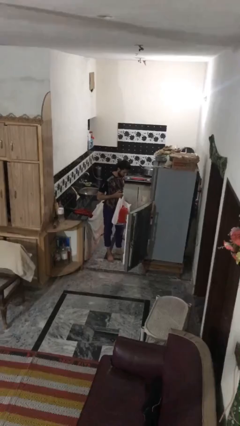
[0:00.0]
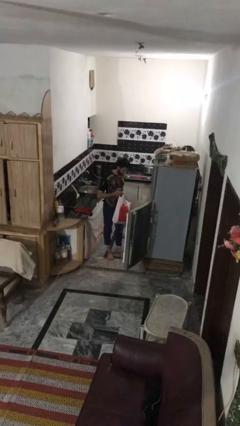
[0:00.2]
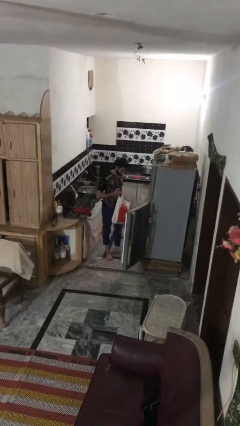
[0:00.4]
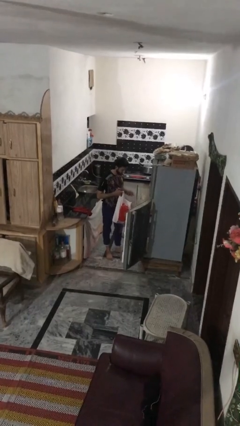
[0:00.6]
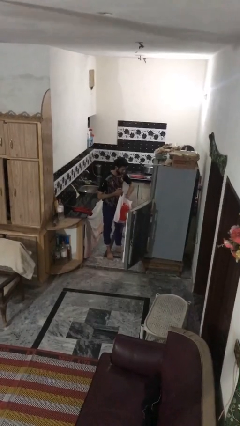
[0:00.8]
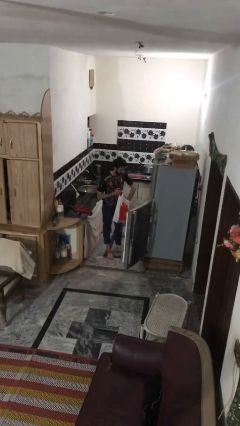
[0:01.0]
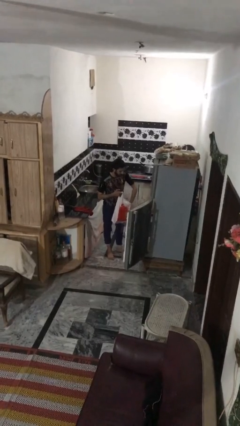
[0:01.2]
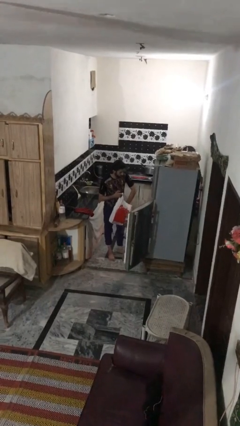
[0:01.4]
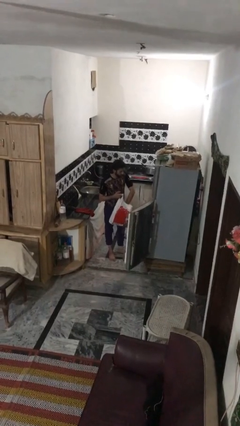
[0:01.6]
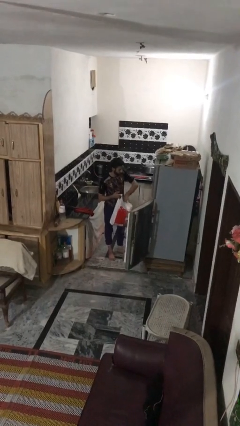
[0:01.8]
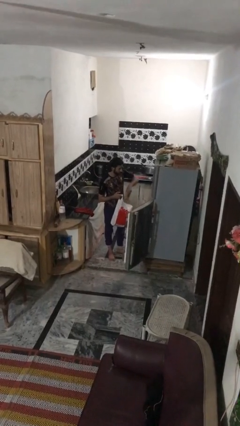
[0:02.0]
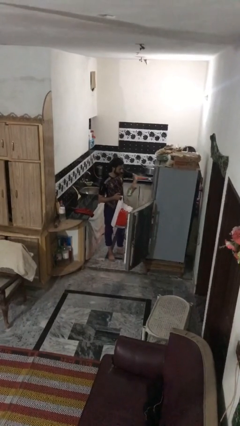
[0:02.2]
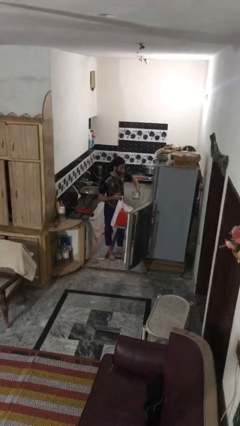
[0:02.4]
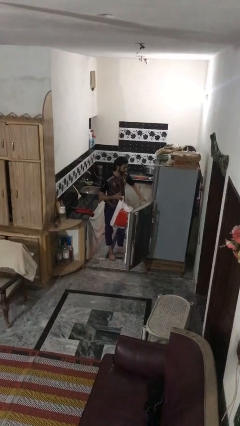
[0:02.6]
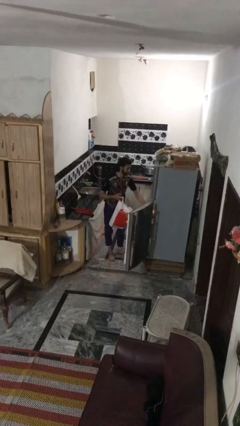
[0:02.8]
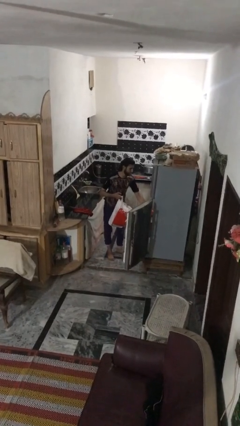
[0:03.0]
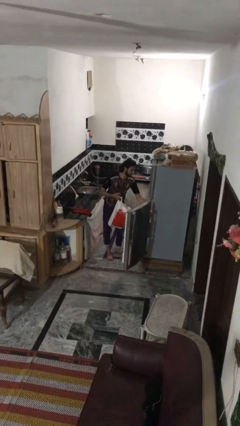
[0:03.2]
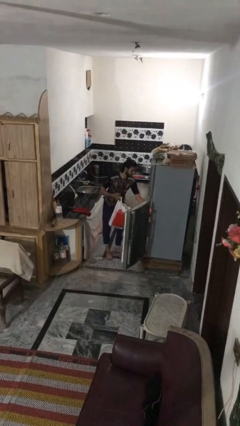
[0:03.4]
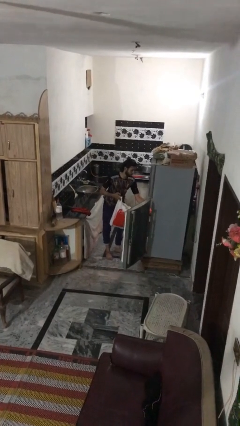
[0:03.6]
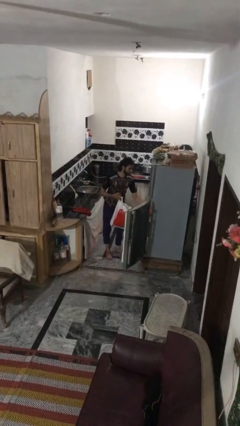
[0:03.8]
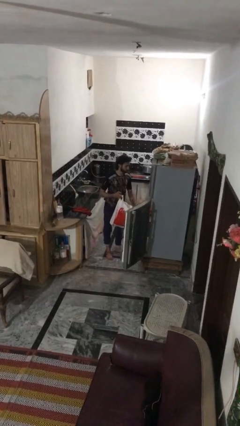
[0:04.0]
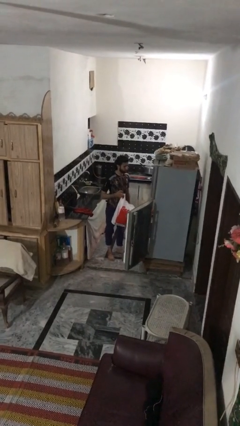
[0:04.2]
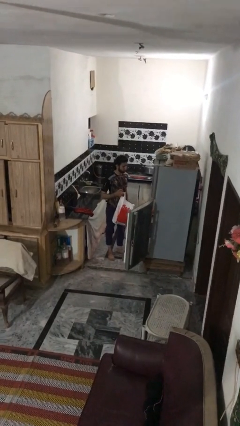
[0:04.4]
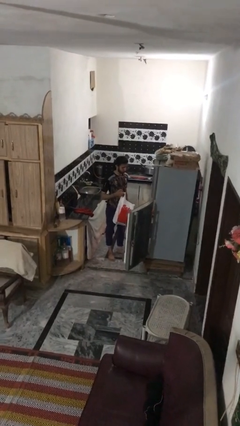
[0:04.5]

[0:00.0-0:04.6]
person loads groceries into refrigerator

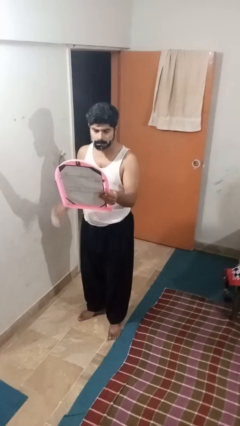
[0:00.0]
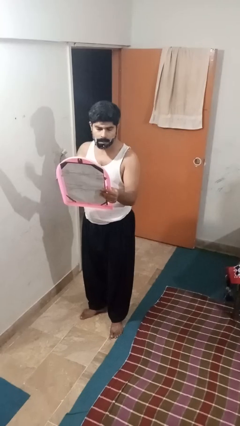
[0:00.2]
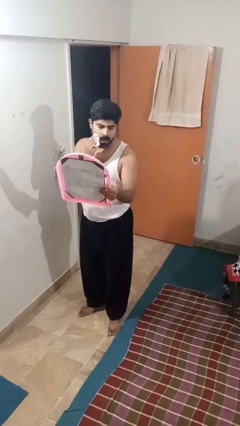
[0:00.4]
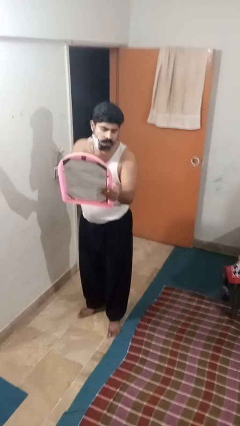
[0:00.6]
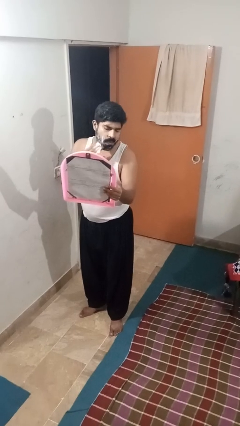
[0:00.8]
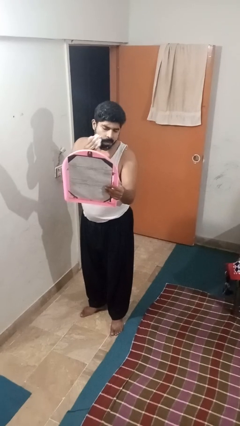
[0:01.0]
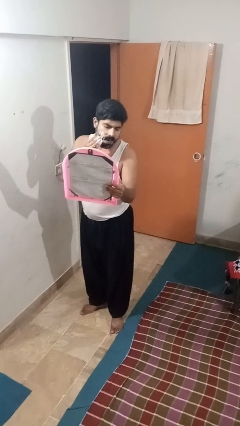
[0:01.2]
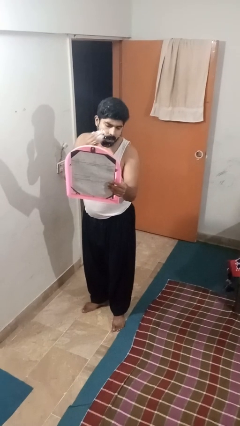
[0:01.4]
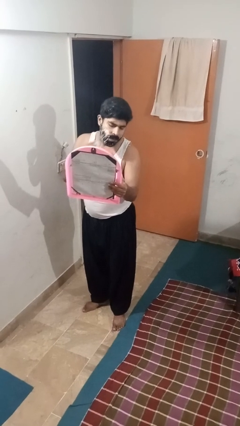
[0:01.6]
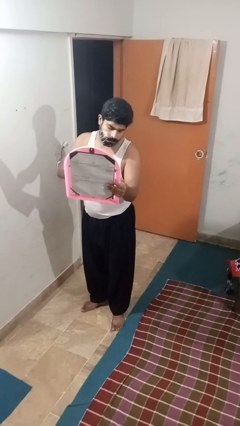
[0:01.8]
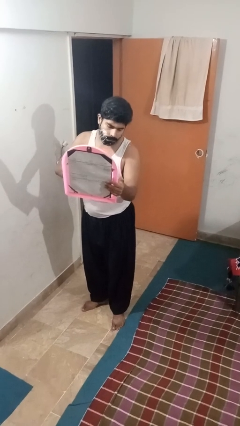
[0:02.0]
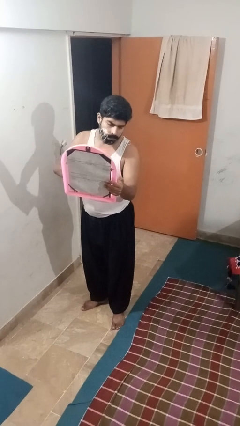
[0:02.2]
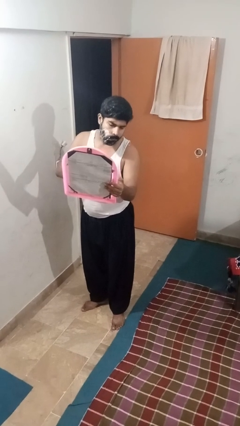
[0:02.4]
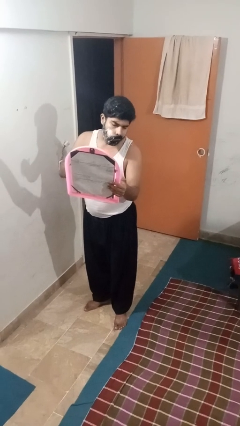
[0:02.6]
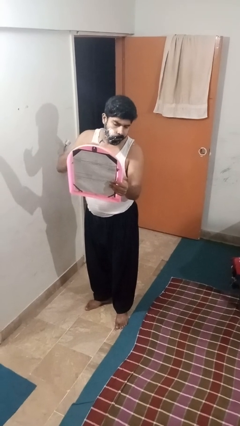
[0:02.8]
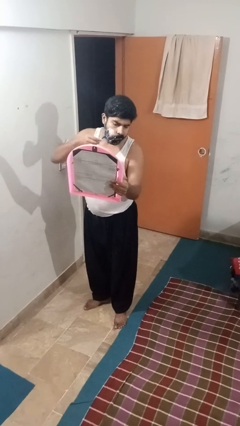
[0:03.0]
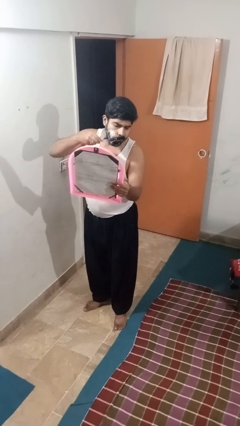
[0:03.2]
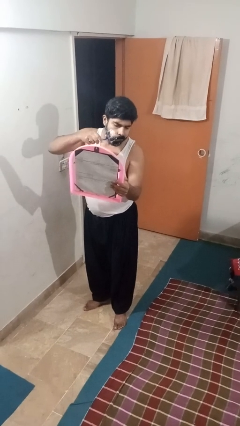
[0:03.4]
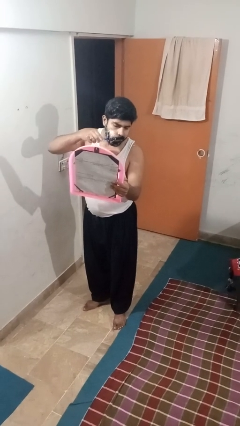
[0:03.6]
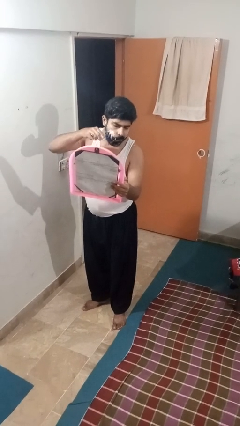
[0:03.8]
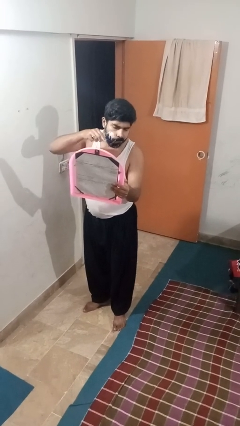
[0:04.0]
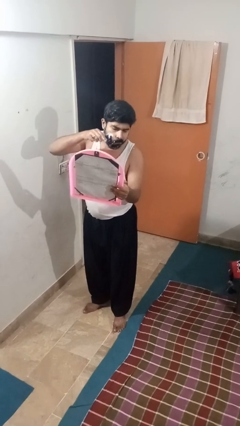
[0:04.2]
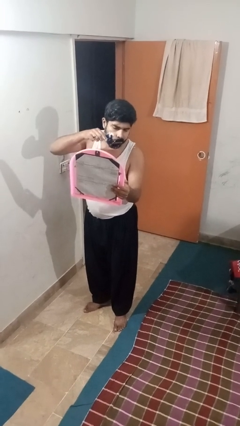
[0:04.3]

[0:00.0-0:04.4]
person applies shaving cream

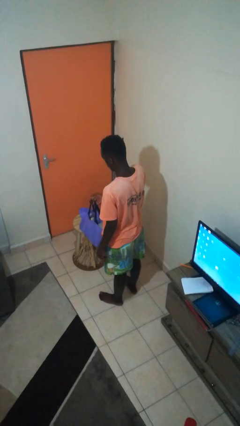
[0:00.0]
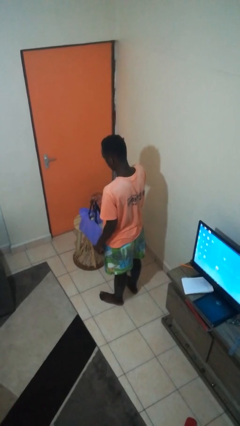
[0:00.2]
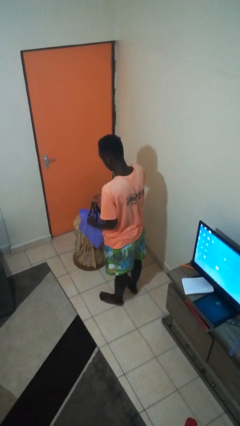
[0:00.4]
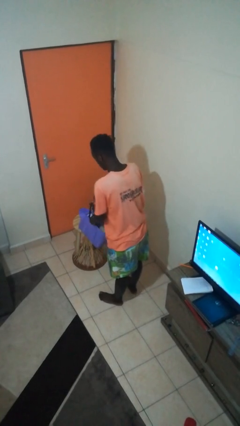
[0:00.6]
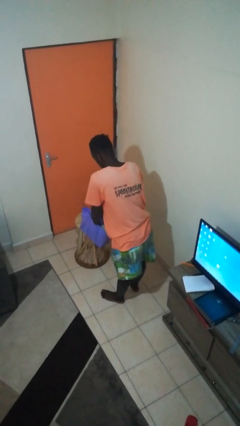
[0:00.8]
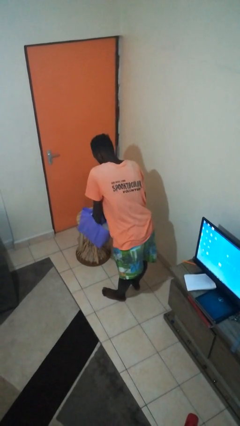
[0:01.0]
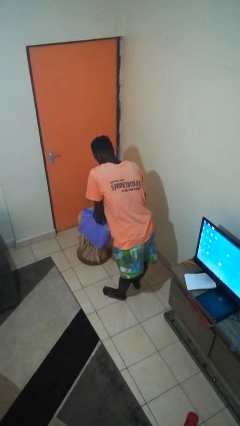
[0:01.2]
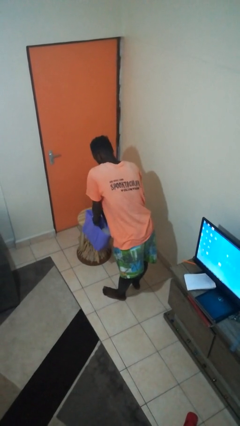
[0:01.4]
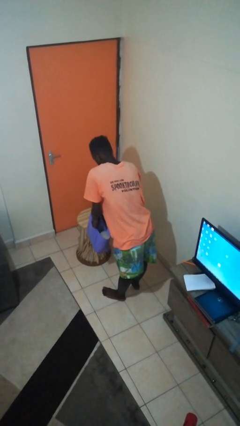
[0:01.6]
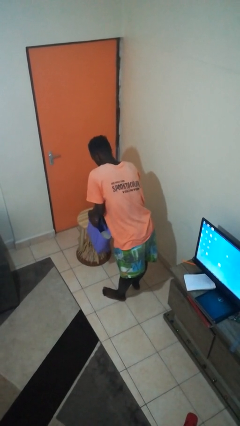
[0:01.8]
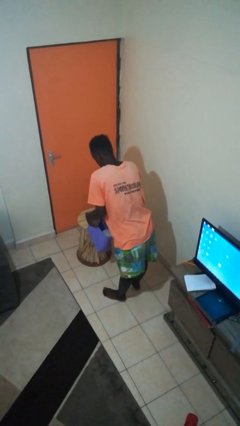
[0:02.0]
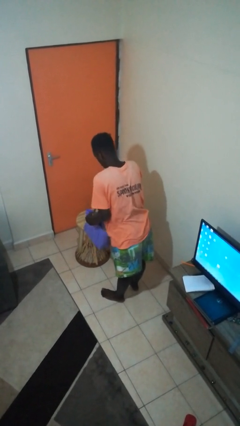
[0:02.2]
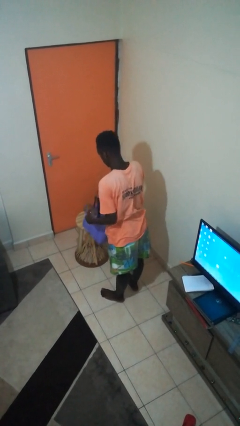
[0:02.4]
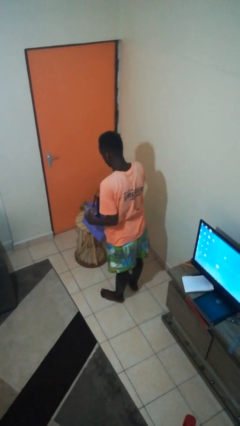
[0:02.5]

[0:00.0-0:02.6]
person takes object from bag

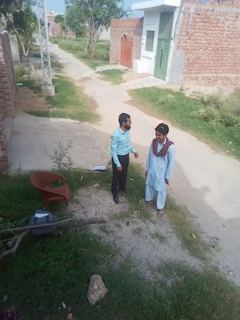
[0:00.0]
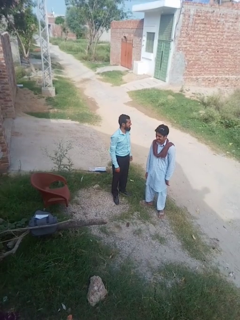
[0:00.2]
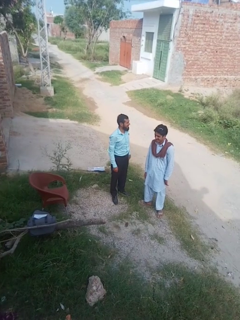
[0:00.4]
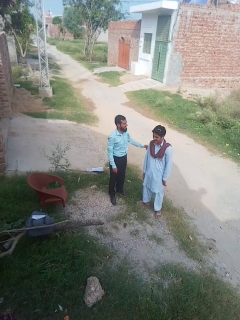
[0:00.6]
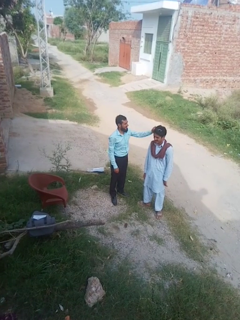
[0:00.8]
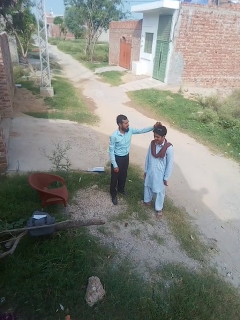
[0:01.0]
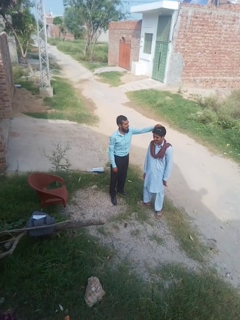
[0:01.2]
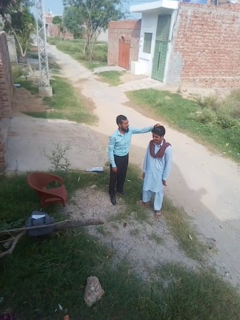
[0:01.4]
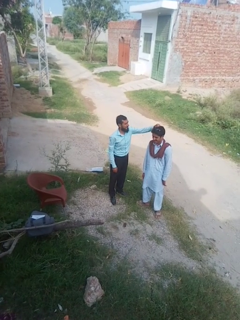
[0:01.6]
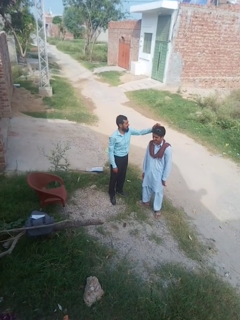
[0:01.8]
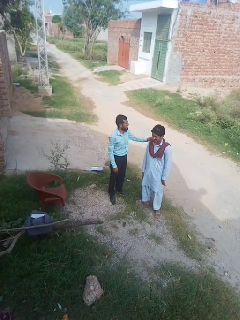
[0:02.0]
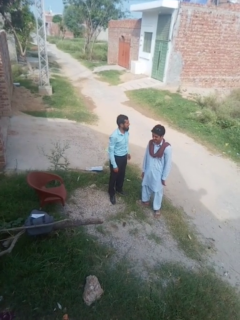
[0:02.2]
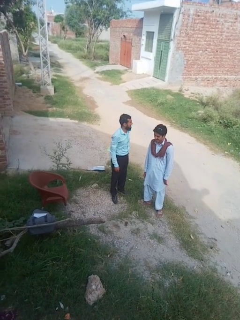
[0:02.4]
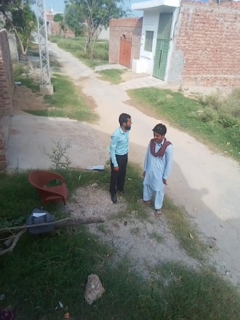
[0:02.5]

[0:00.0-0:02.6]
person grabs person by hair

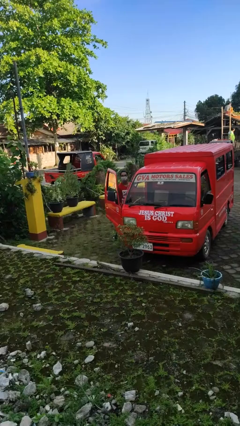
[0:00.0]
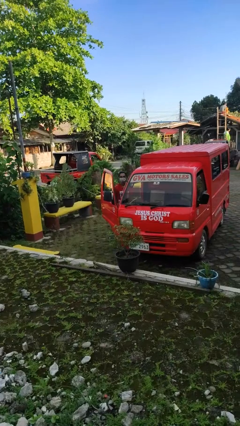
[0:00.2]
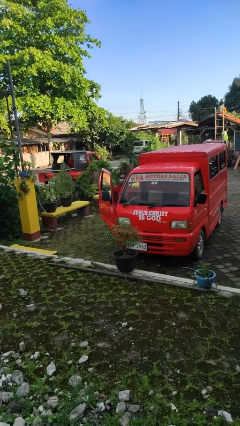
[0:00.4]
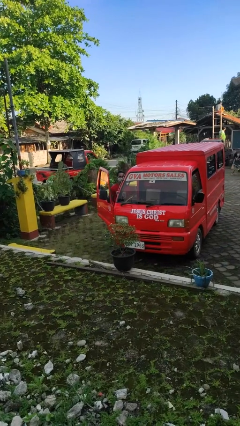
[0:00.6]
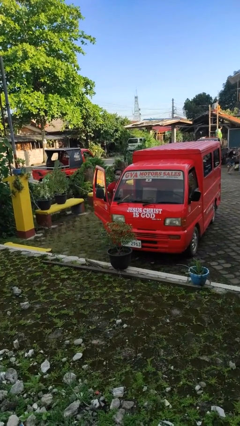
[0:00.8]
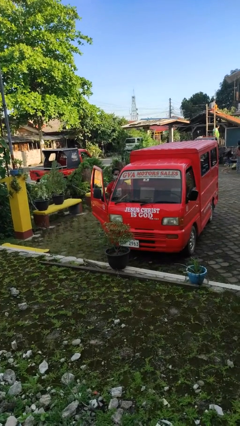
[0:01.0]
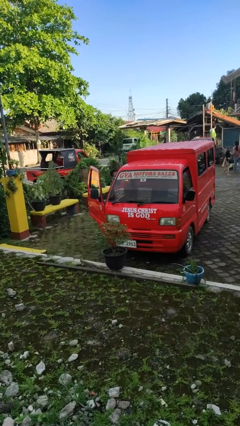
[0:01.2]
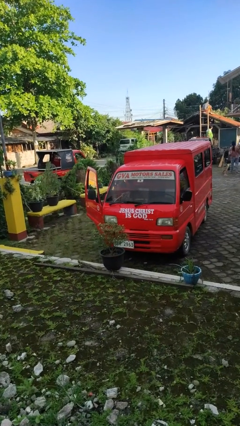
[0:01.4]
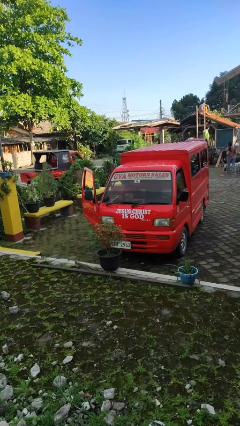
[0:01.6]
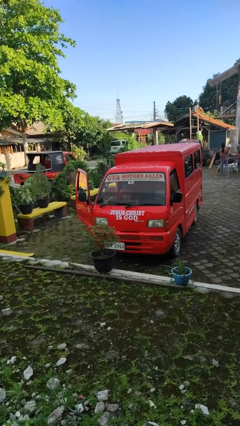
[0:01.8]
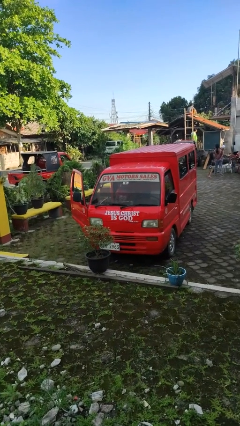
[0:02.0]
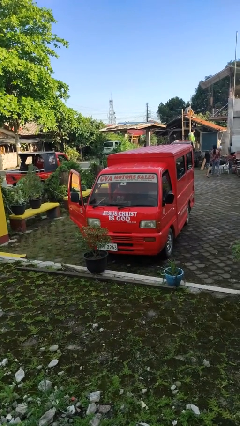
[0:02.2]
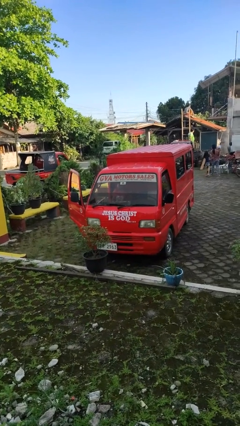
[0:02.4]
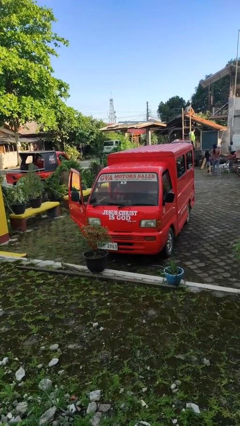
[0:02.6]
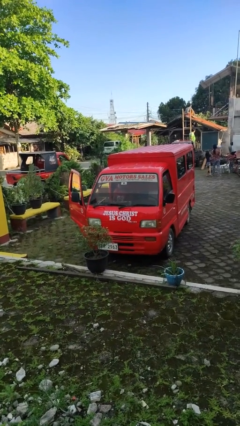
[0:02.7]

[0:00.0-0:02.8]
person enters car

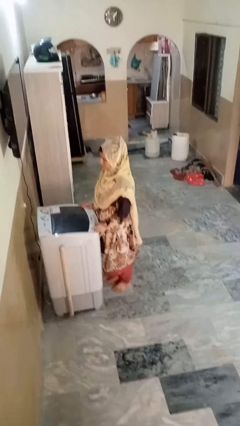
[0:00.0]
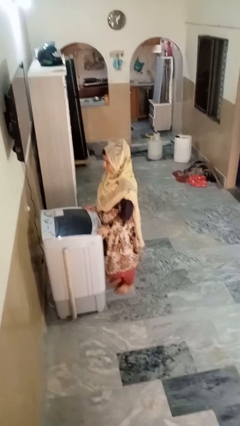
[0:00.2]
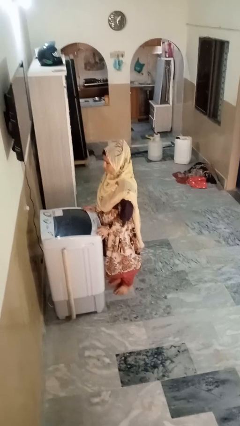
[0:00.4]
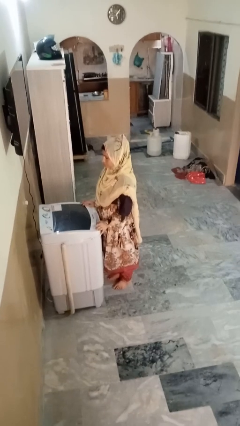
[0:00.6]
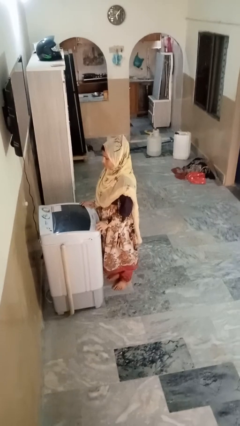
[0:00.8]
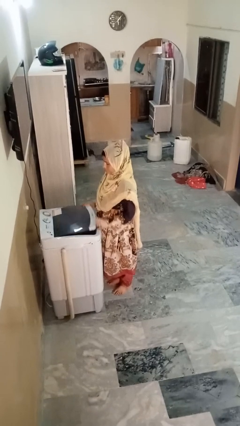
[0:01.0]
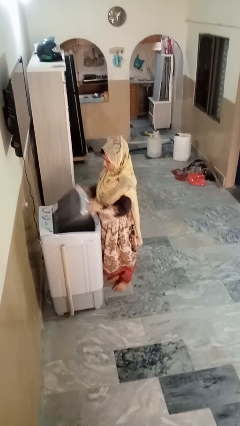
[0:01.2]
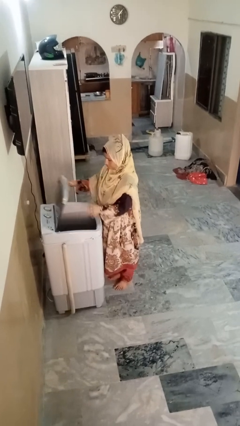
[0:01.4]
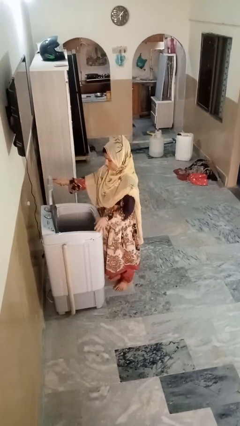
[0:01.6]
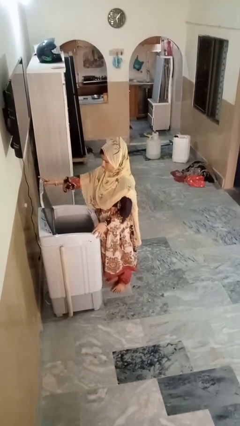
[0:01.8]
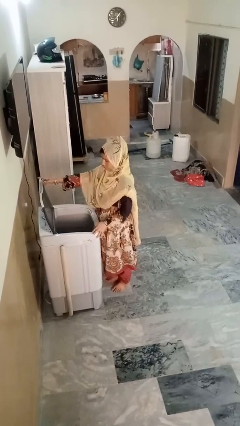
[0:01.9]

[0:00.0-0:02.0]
person opens clothes washer
